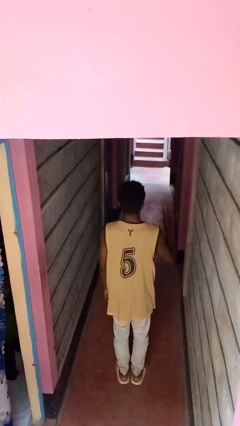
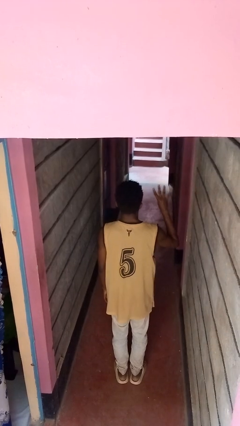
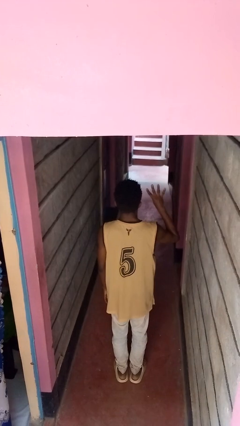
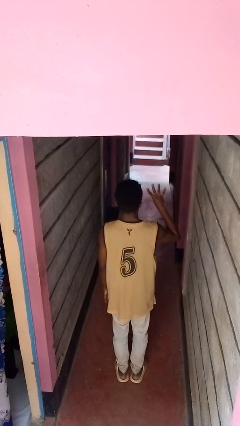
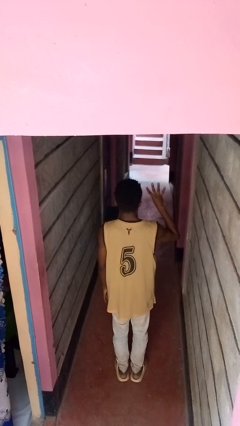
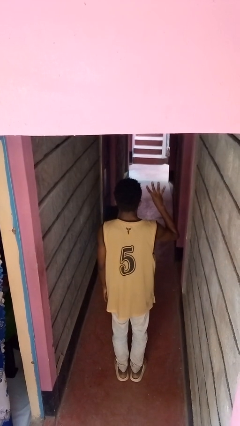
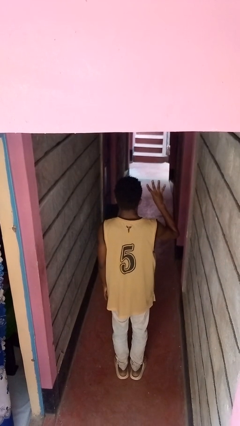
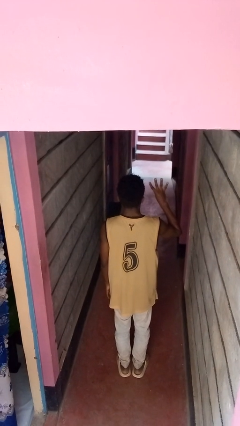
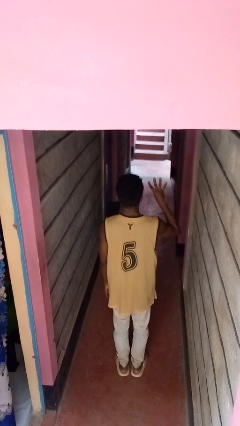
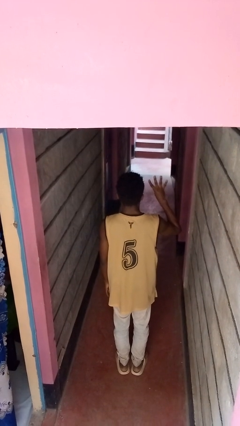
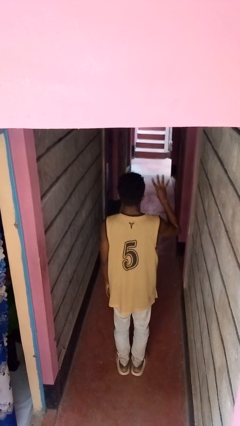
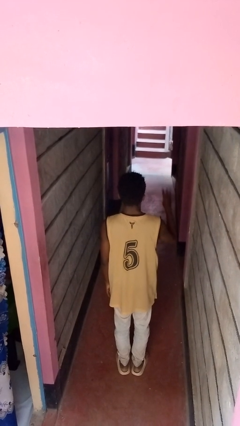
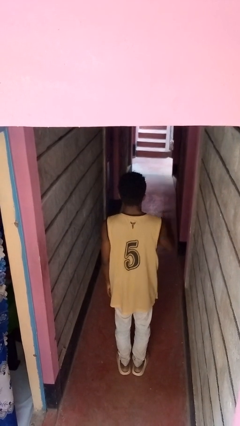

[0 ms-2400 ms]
person gestures number four

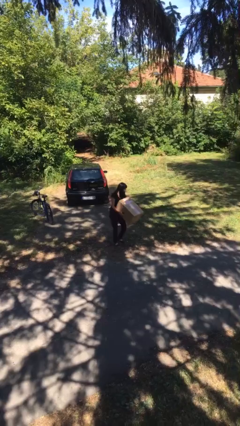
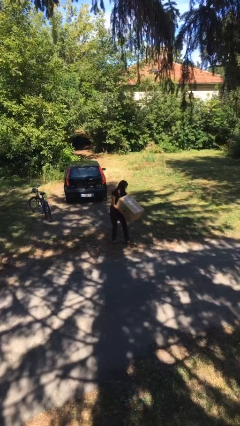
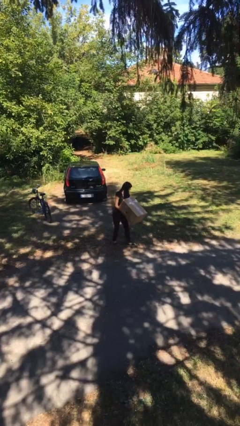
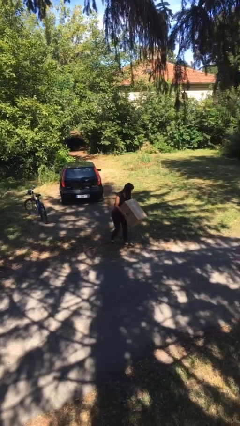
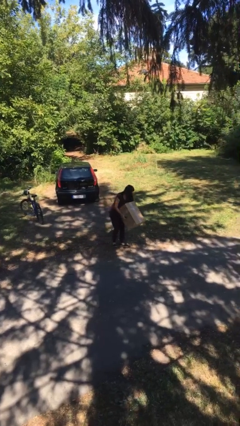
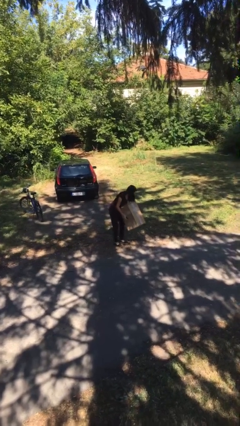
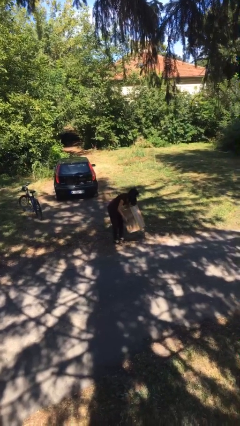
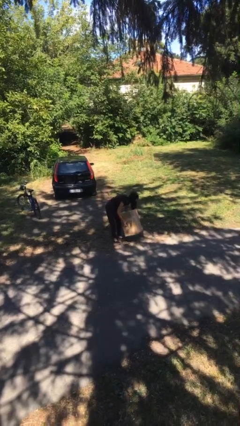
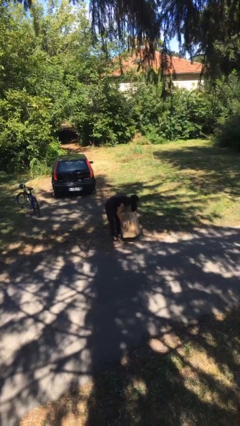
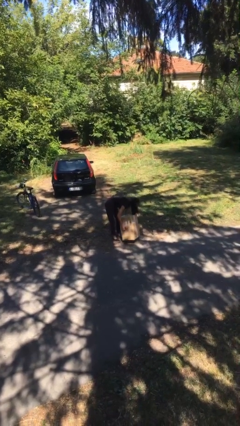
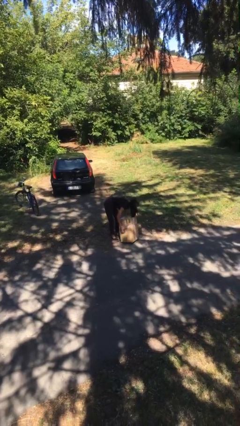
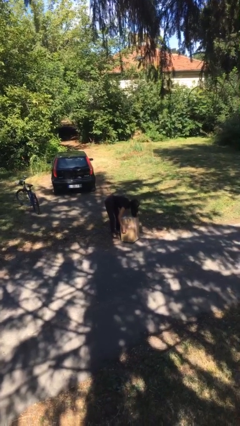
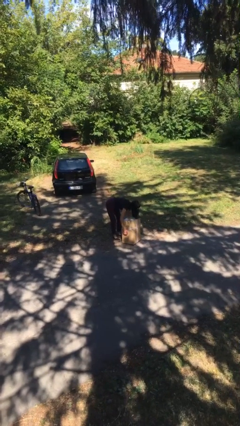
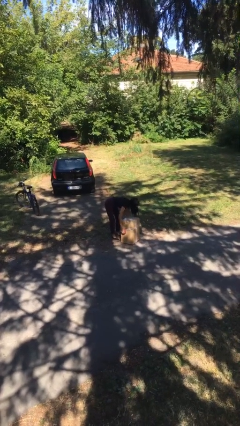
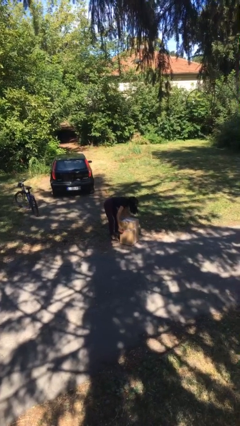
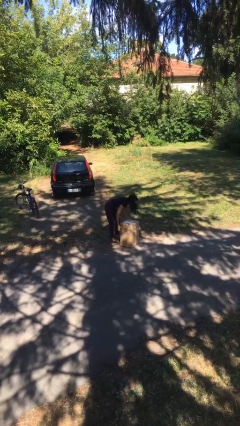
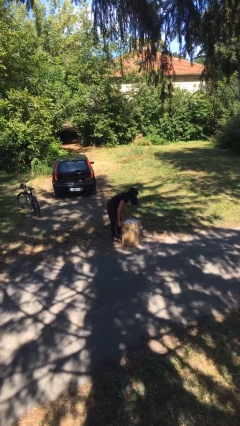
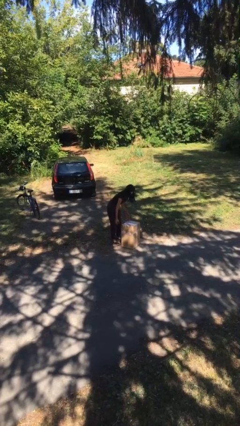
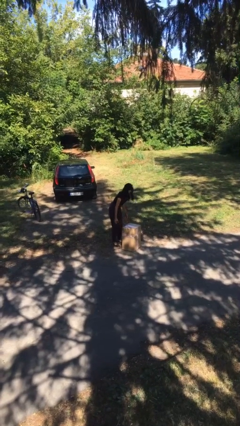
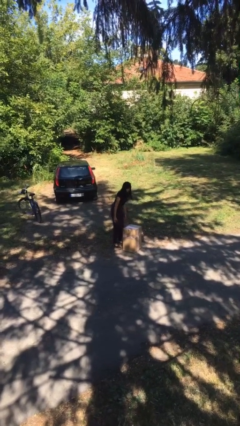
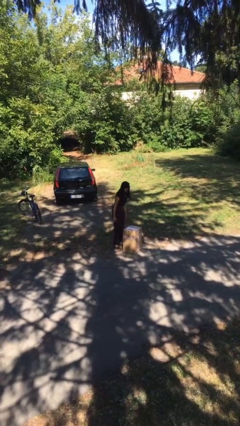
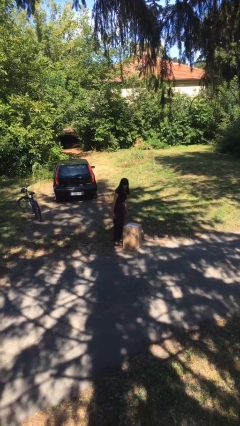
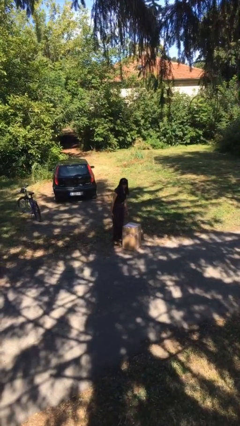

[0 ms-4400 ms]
person puts down object on floor

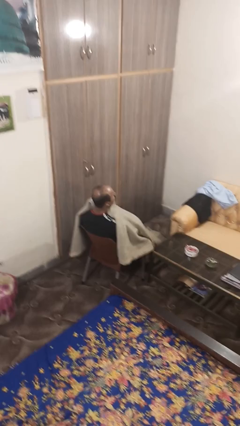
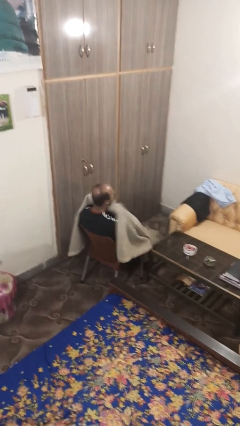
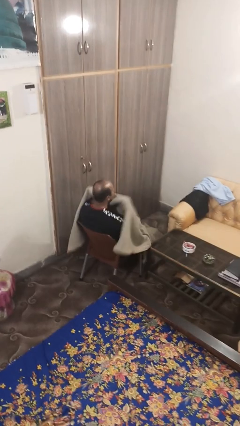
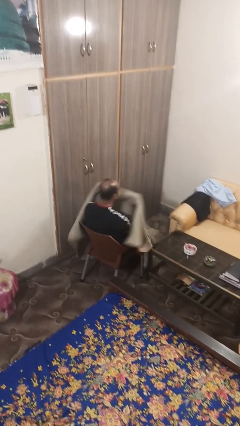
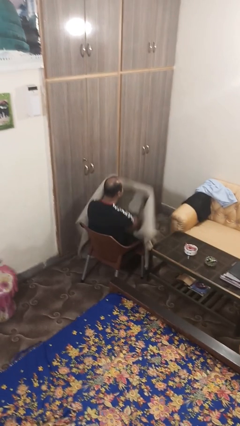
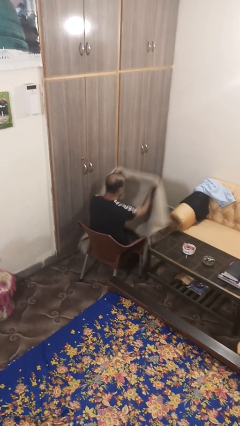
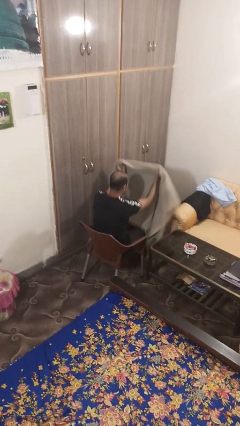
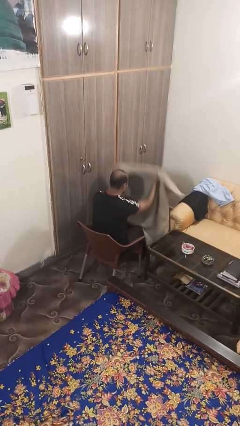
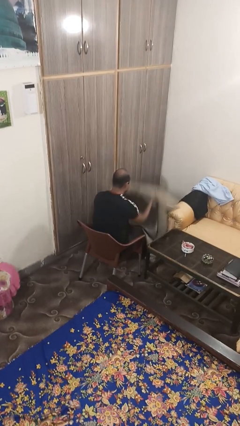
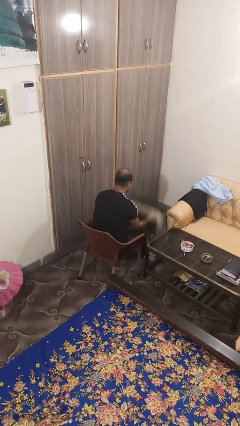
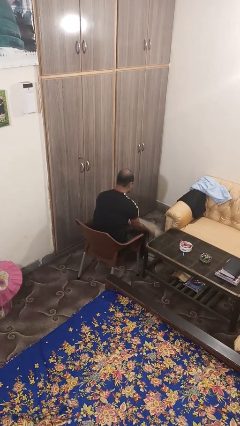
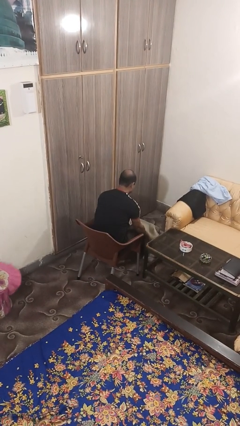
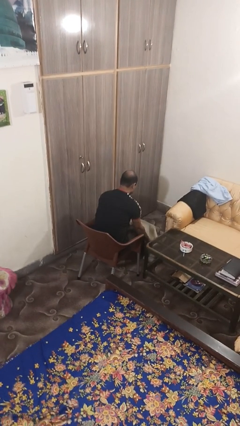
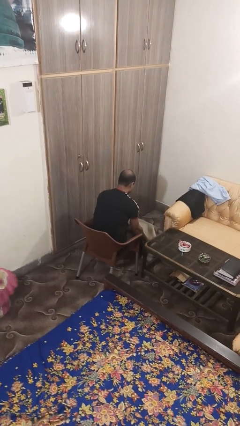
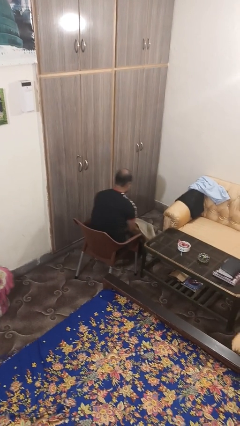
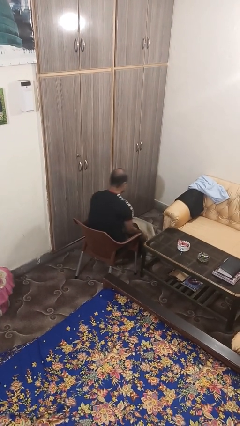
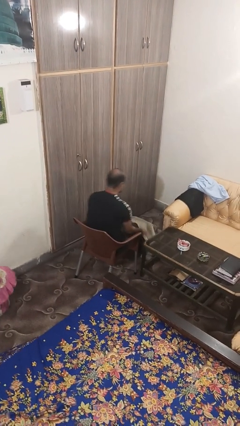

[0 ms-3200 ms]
person uncovers with blanket

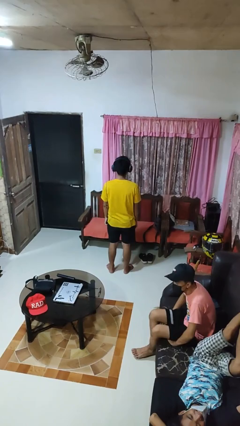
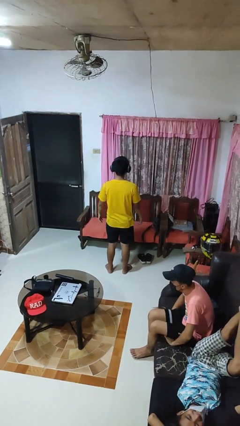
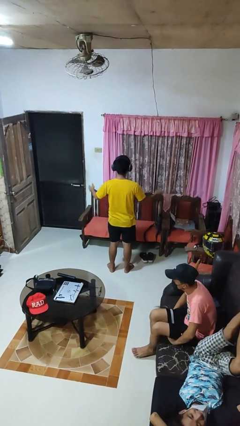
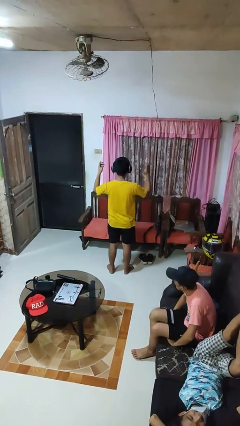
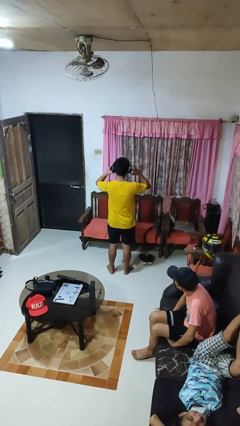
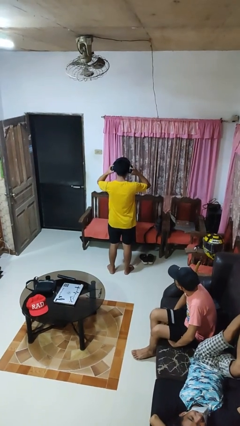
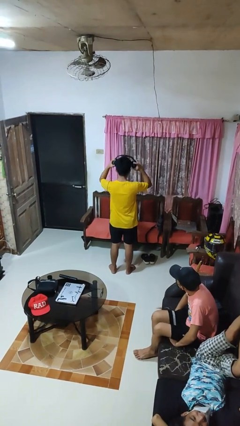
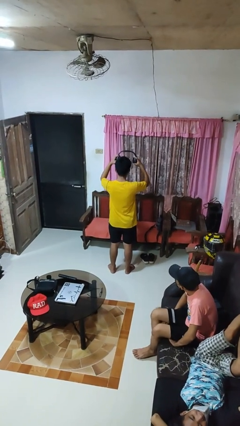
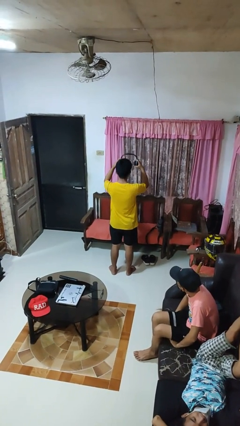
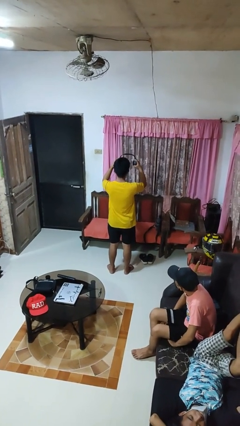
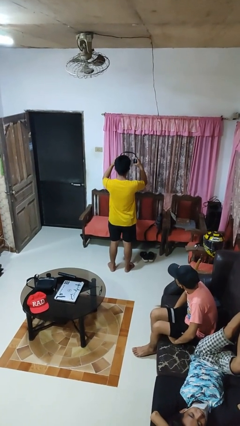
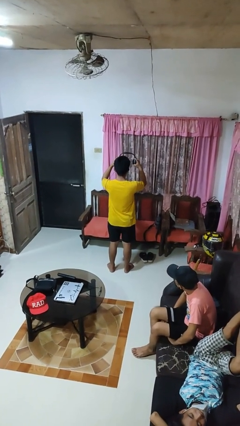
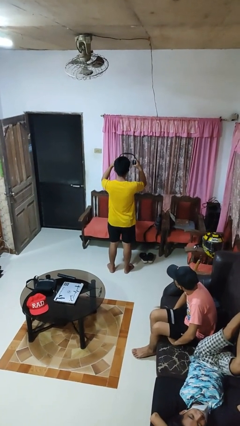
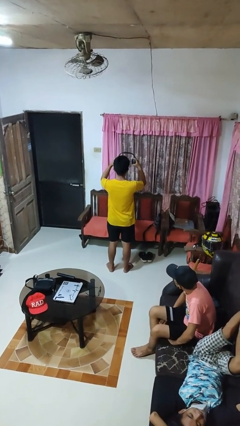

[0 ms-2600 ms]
person takes off headphones

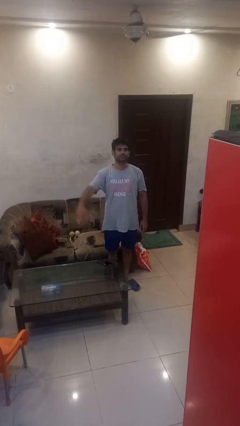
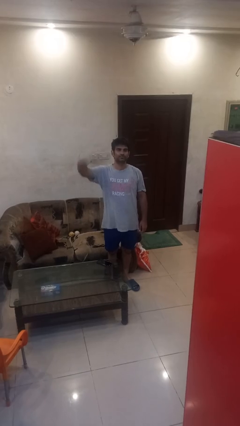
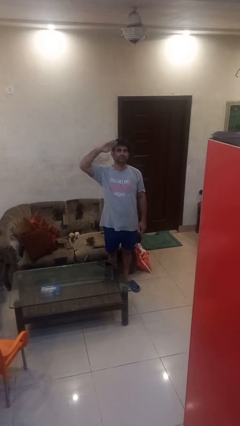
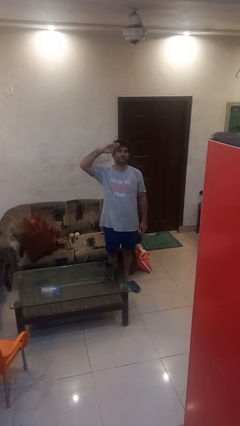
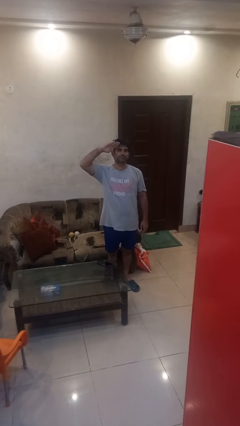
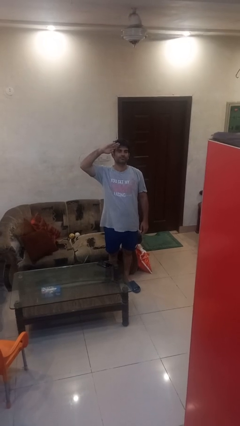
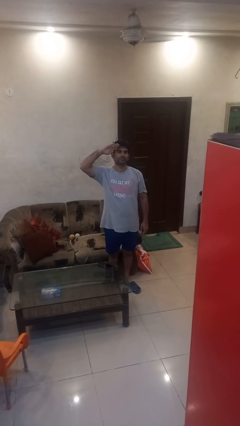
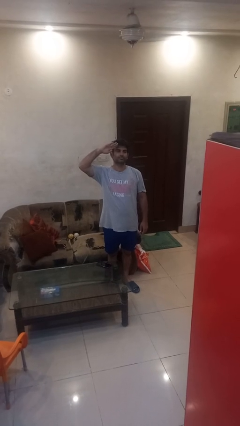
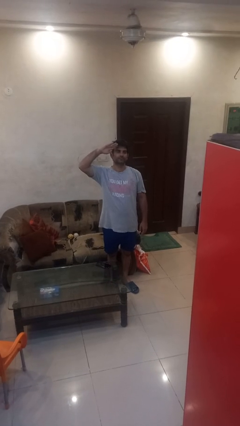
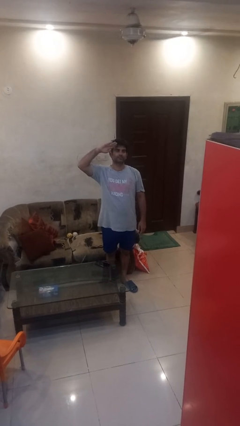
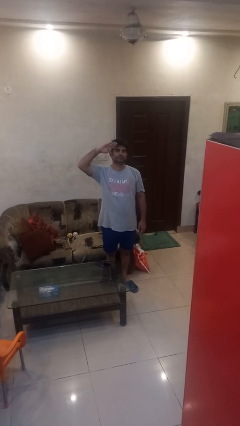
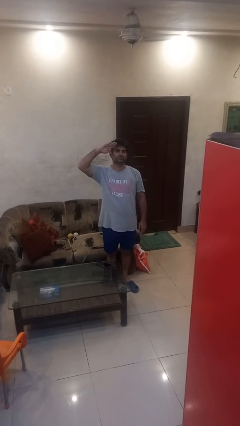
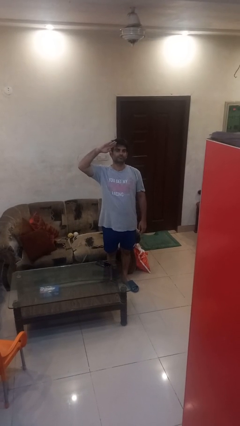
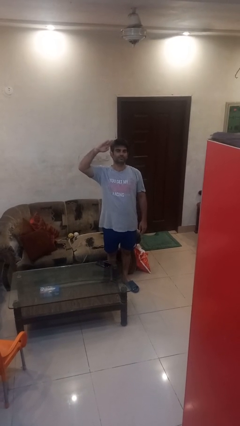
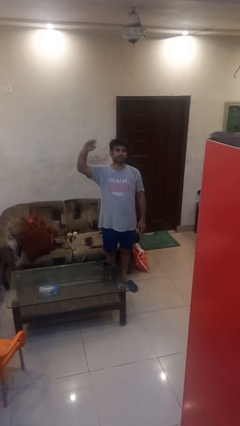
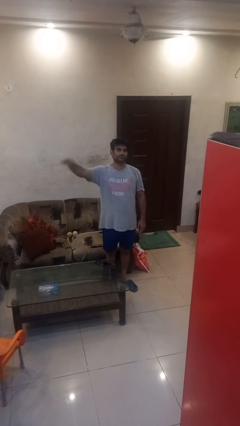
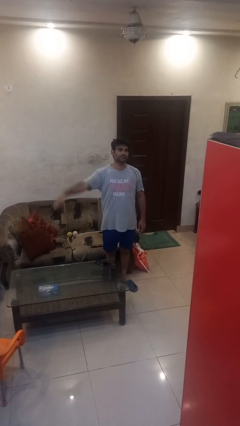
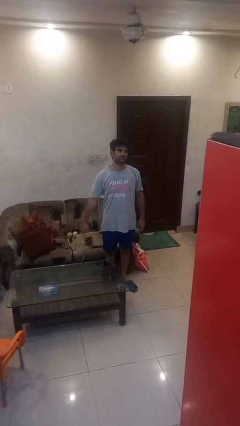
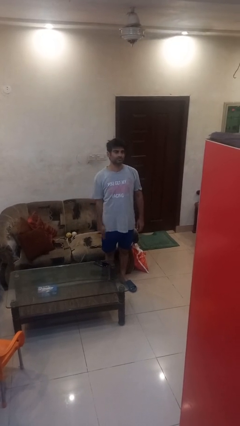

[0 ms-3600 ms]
person salutes

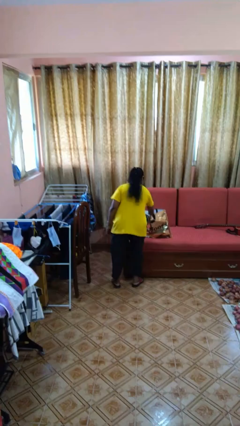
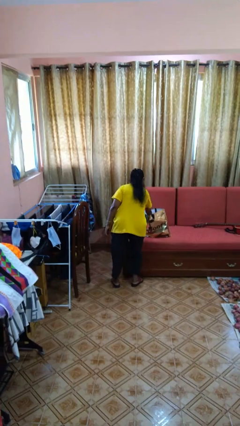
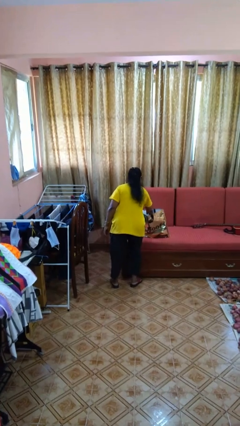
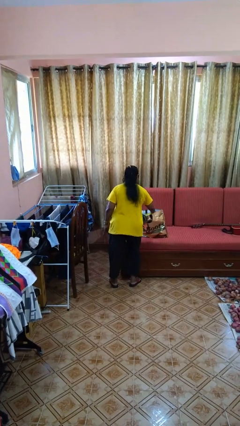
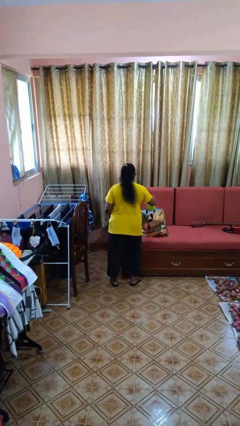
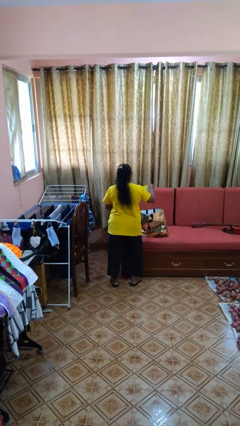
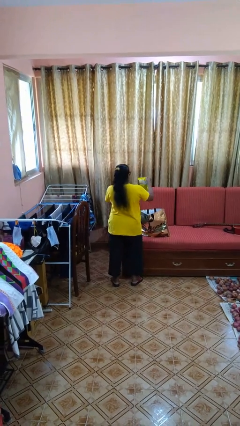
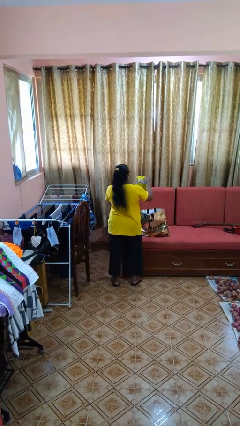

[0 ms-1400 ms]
person takes object from bag
